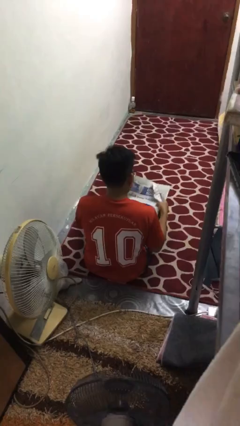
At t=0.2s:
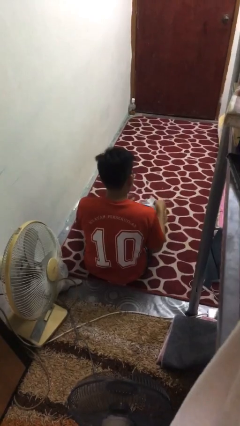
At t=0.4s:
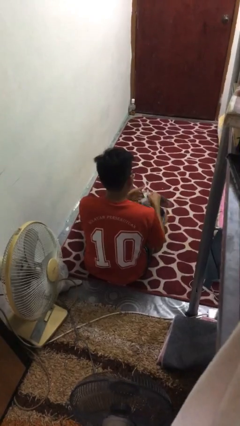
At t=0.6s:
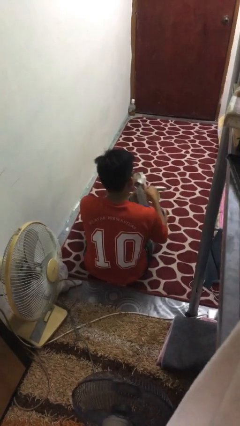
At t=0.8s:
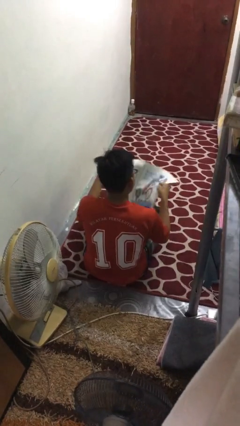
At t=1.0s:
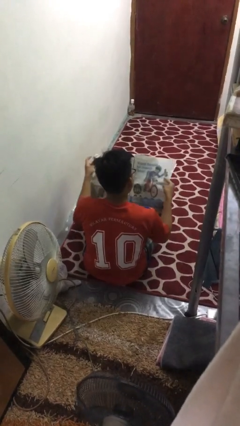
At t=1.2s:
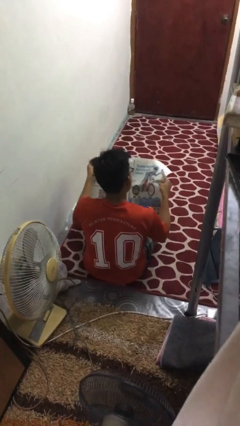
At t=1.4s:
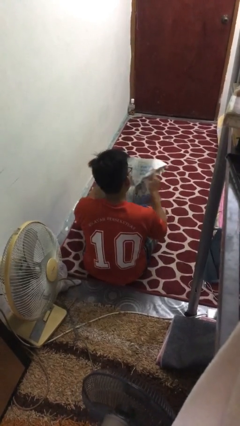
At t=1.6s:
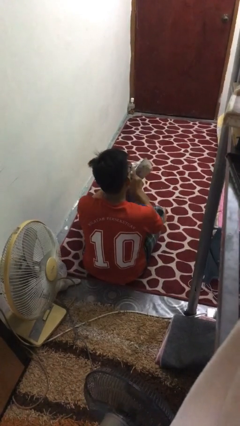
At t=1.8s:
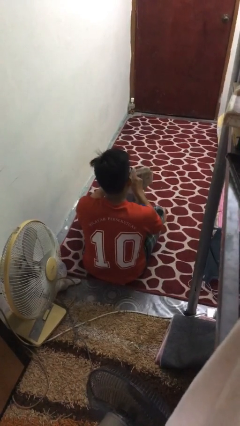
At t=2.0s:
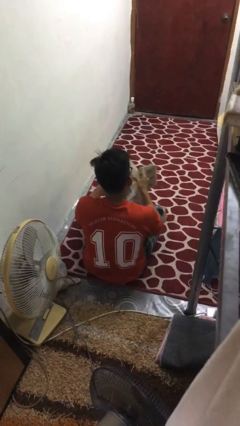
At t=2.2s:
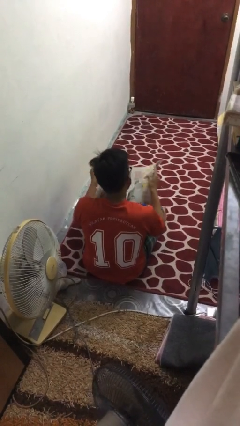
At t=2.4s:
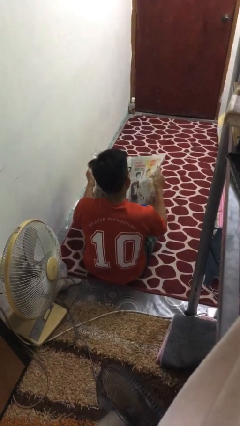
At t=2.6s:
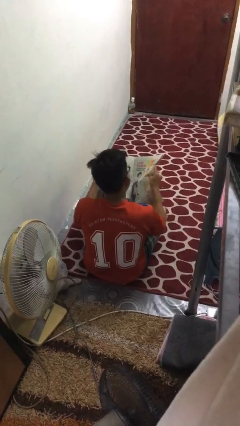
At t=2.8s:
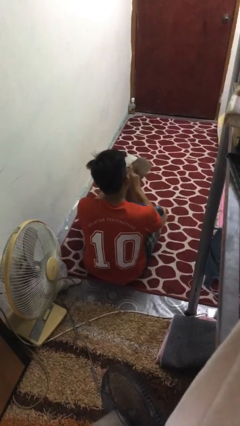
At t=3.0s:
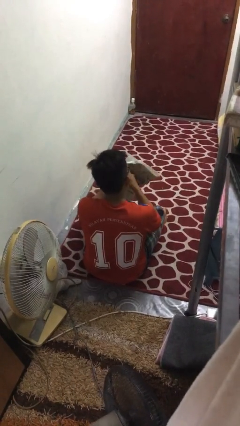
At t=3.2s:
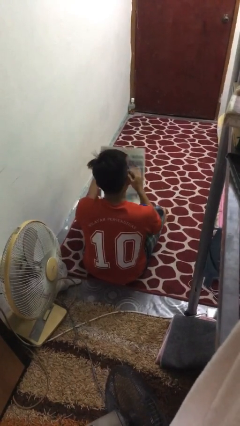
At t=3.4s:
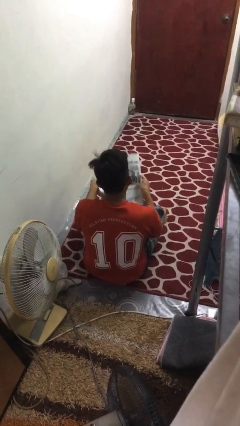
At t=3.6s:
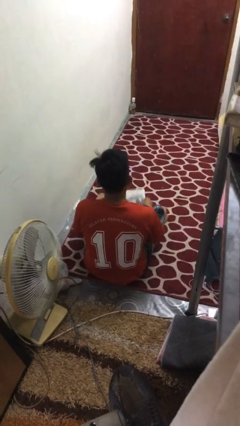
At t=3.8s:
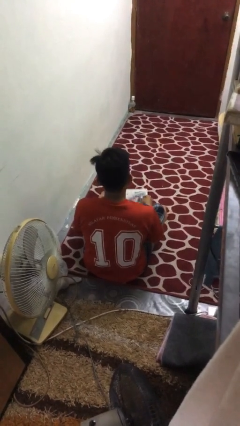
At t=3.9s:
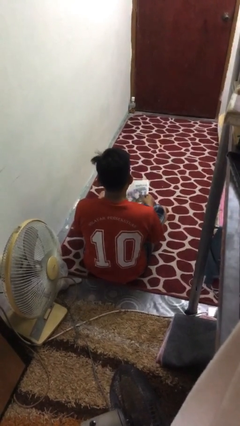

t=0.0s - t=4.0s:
person reads newspaper

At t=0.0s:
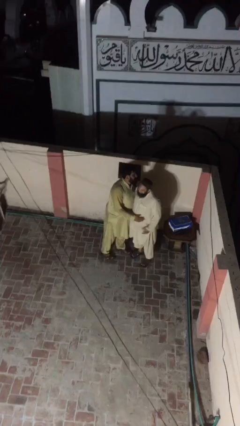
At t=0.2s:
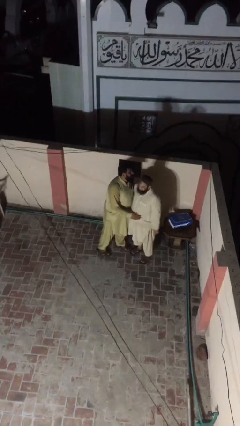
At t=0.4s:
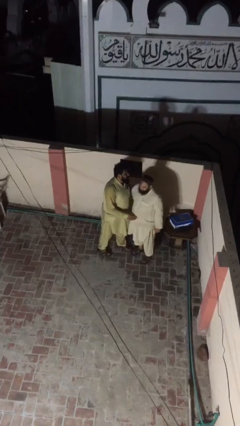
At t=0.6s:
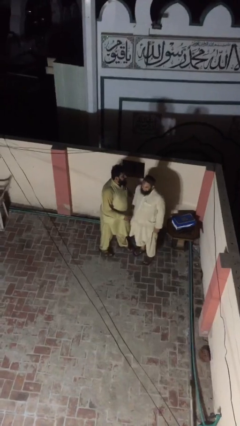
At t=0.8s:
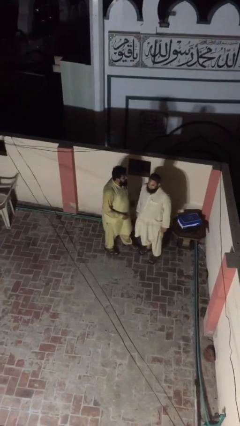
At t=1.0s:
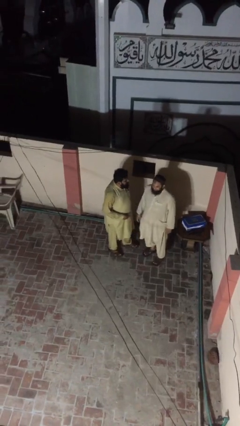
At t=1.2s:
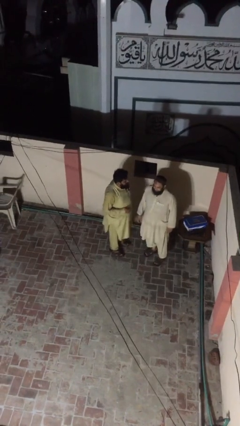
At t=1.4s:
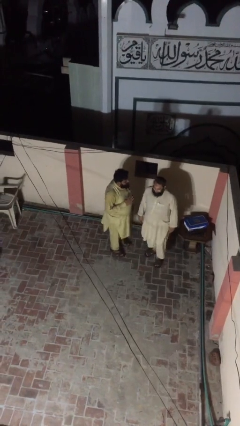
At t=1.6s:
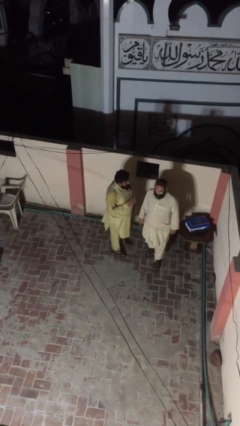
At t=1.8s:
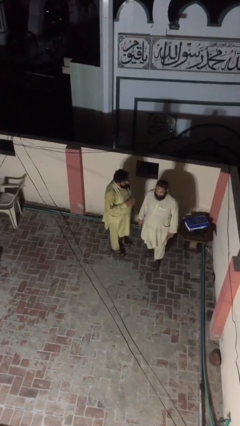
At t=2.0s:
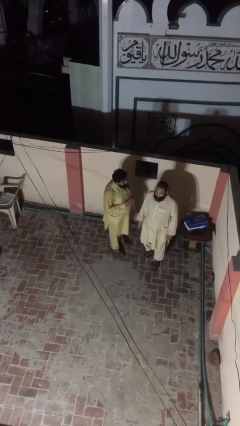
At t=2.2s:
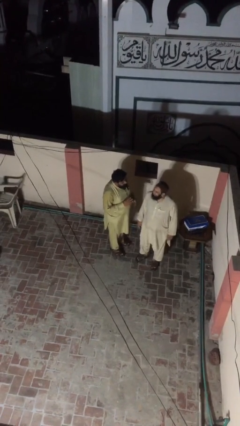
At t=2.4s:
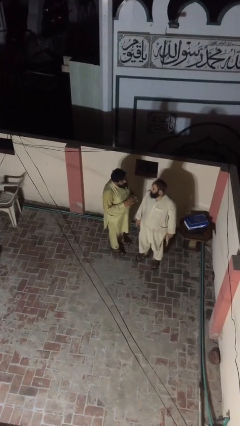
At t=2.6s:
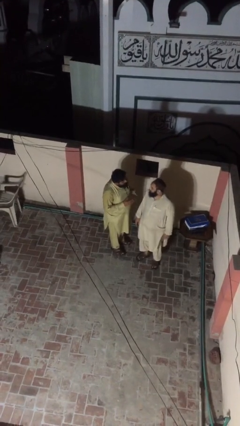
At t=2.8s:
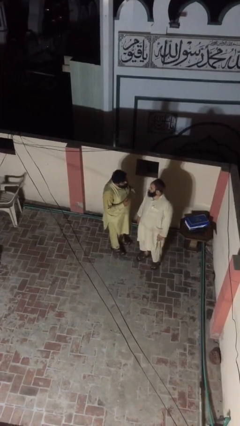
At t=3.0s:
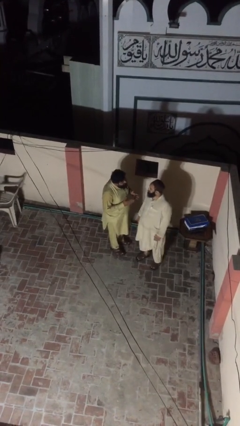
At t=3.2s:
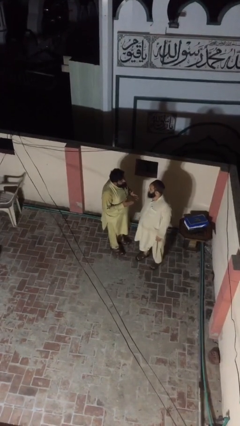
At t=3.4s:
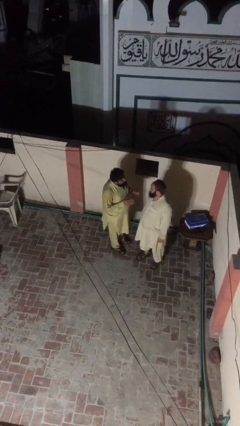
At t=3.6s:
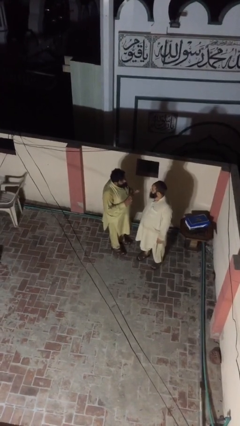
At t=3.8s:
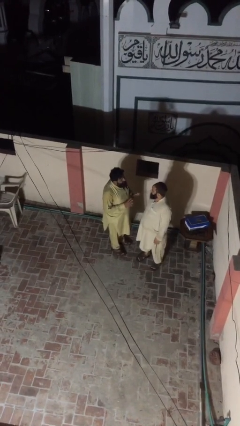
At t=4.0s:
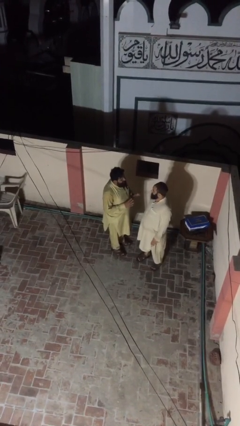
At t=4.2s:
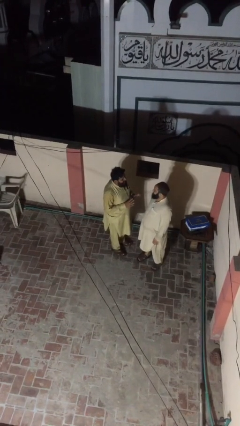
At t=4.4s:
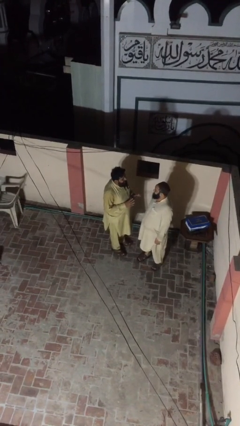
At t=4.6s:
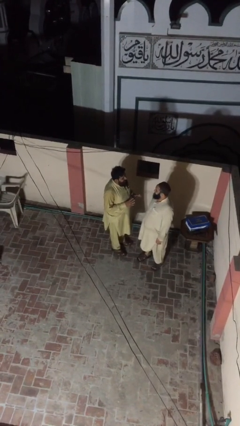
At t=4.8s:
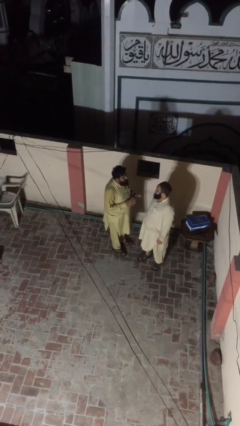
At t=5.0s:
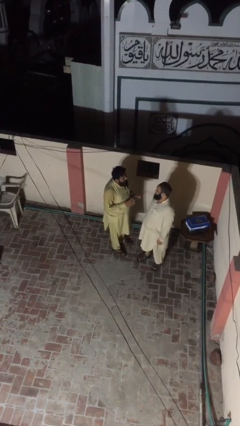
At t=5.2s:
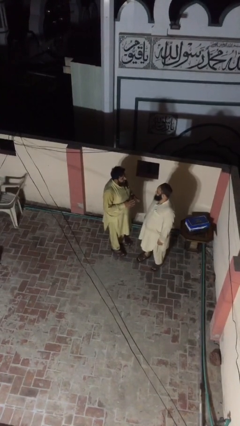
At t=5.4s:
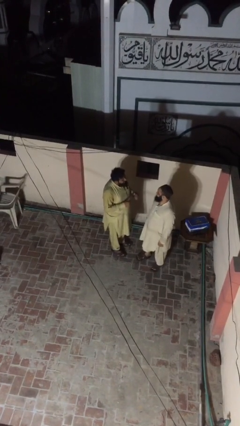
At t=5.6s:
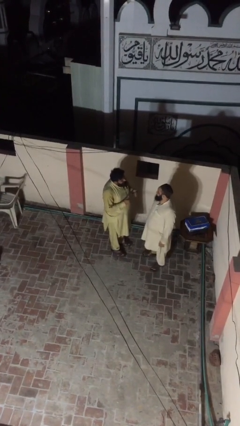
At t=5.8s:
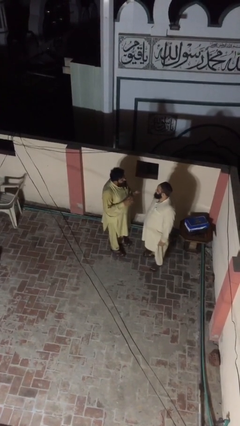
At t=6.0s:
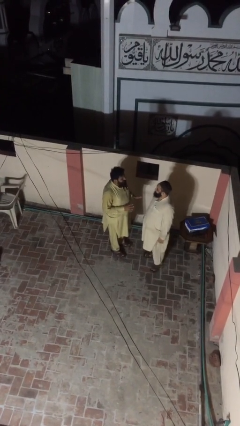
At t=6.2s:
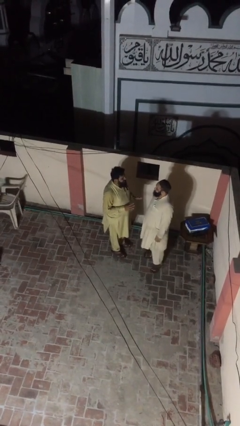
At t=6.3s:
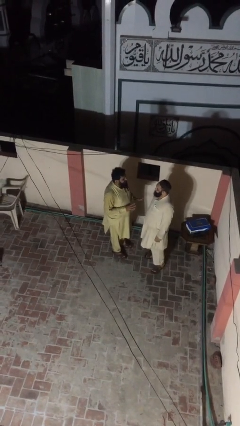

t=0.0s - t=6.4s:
person talks to person

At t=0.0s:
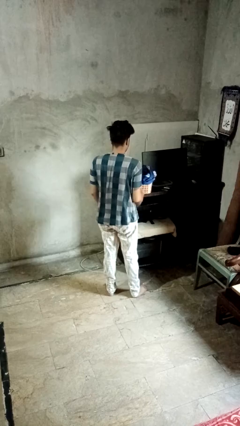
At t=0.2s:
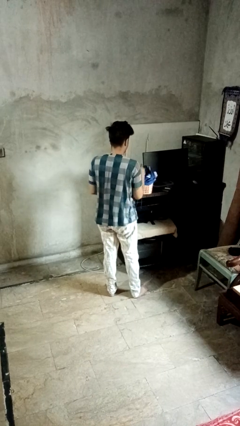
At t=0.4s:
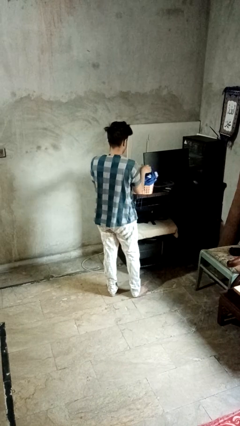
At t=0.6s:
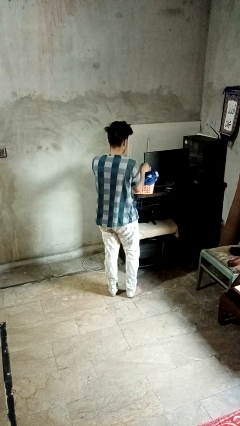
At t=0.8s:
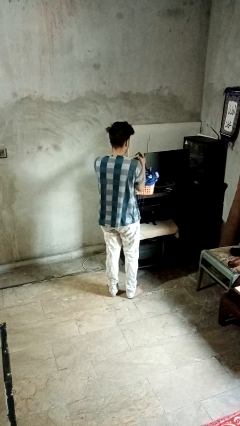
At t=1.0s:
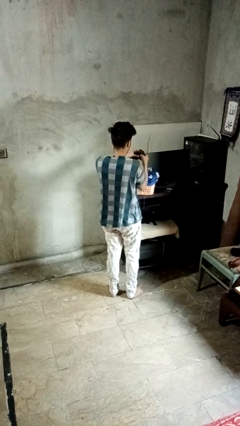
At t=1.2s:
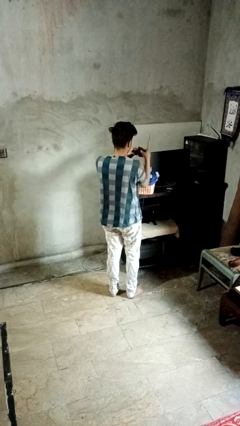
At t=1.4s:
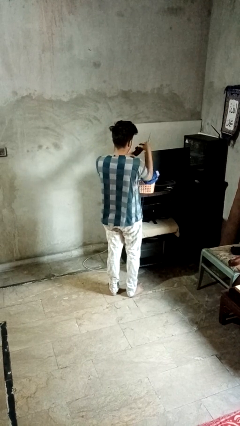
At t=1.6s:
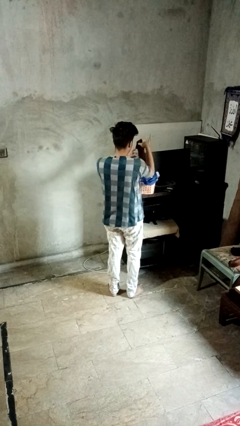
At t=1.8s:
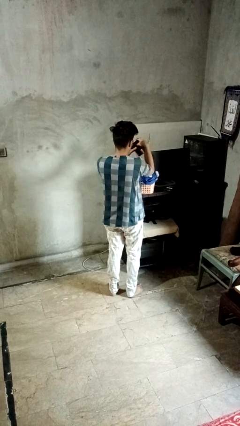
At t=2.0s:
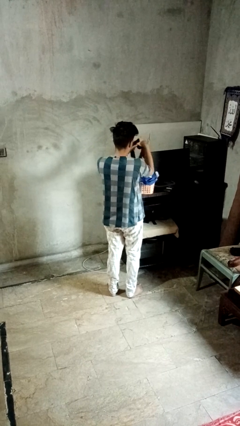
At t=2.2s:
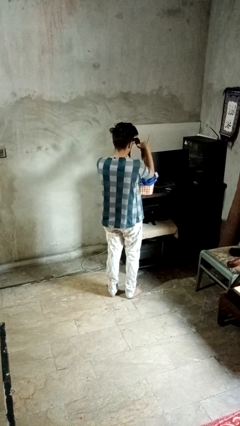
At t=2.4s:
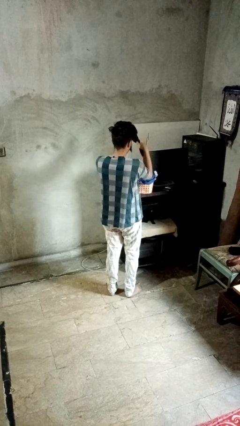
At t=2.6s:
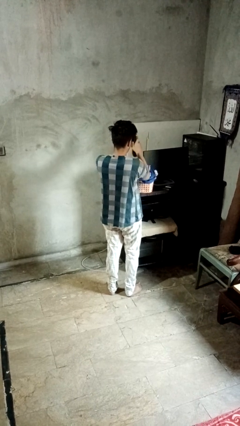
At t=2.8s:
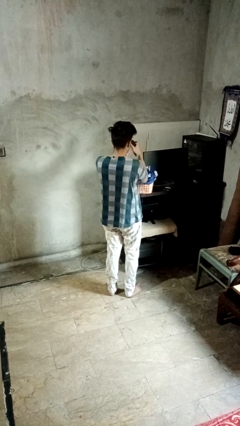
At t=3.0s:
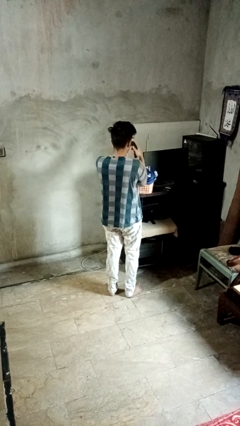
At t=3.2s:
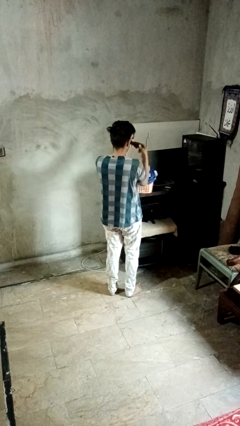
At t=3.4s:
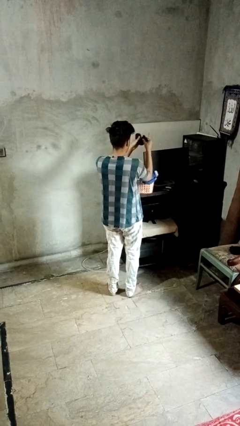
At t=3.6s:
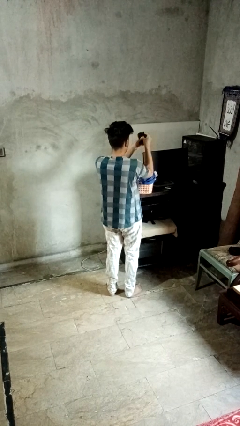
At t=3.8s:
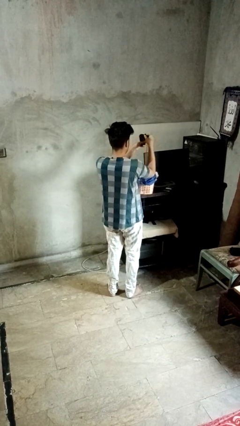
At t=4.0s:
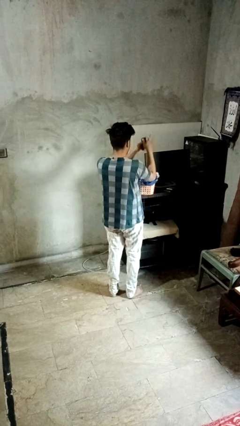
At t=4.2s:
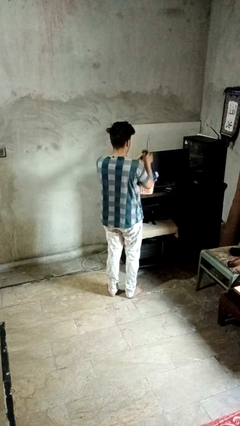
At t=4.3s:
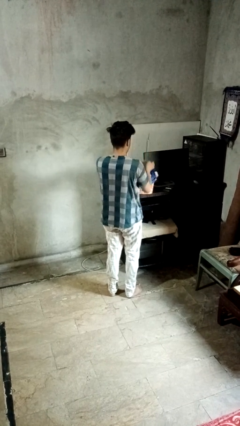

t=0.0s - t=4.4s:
person folds socks

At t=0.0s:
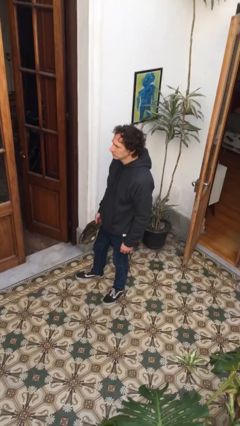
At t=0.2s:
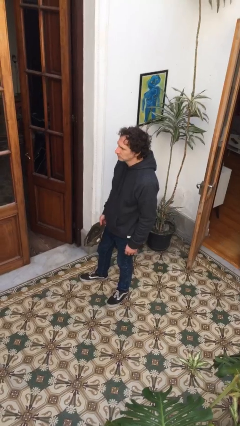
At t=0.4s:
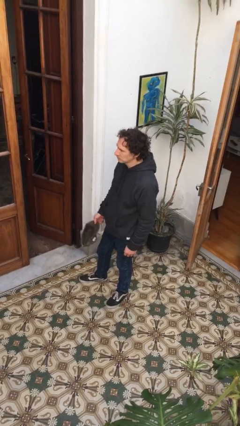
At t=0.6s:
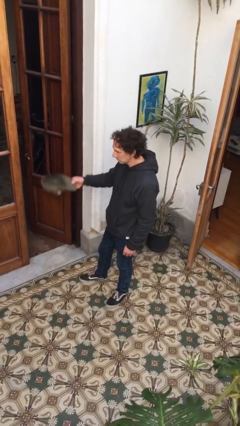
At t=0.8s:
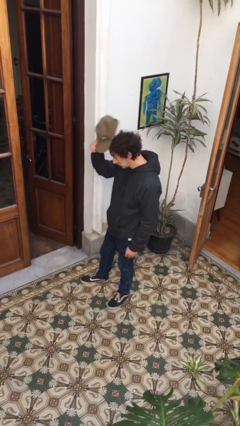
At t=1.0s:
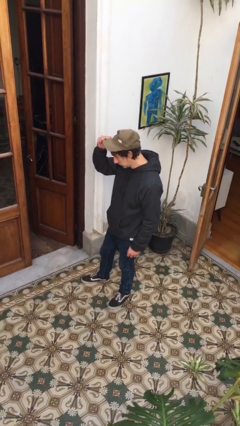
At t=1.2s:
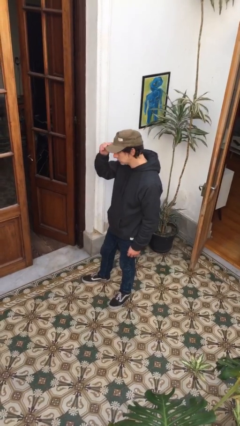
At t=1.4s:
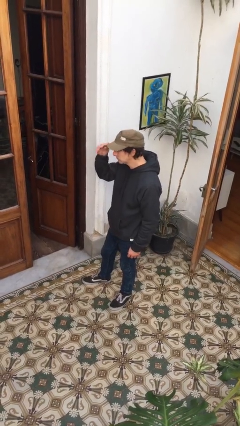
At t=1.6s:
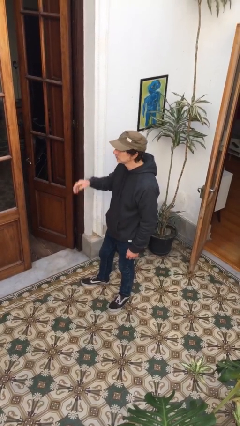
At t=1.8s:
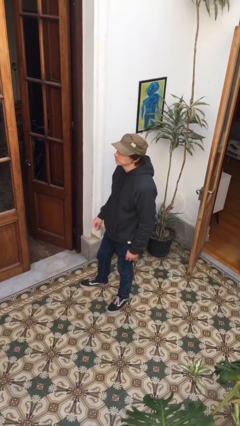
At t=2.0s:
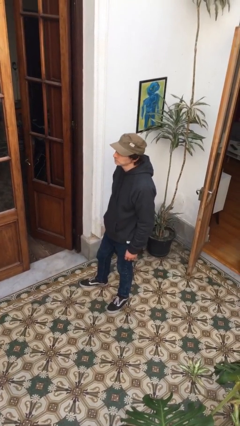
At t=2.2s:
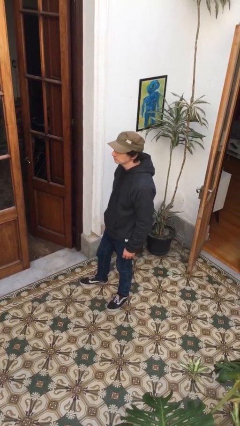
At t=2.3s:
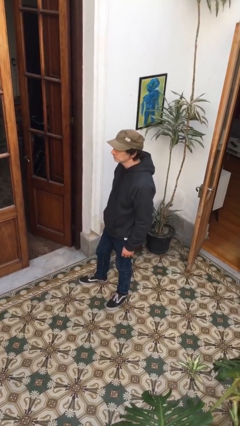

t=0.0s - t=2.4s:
person puts on hat

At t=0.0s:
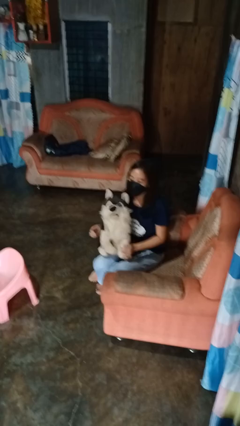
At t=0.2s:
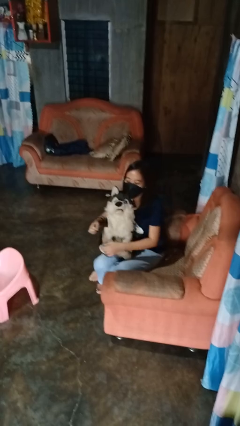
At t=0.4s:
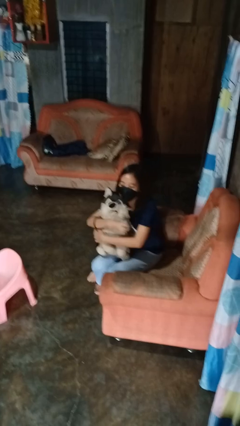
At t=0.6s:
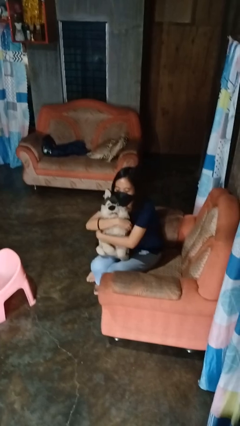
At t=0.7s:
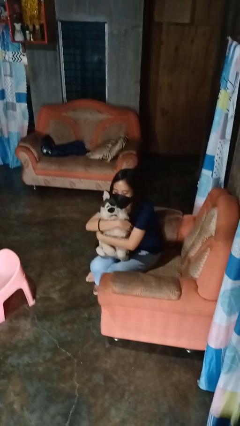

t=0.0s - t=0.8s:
person hugs stuffed animal
